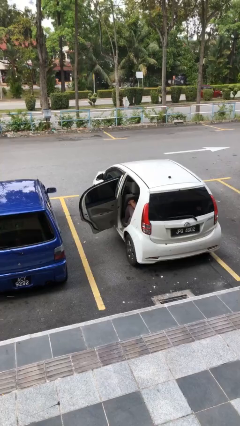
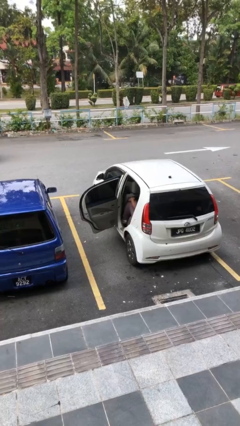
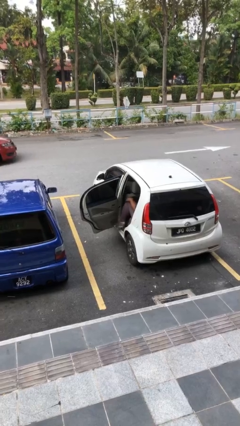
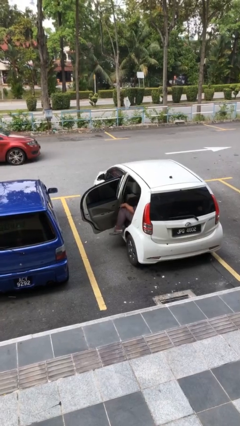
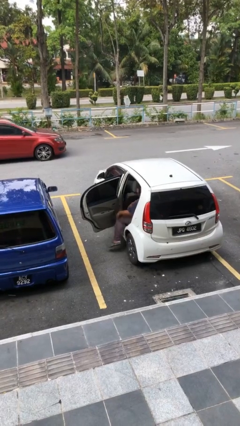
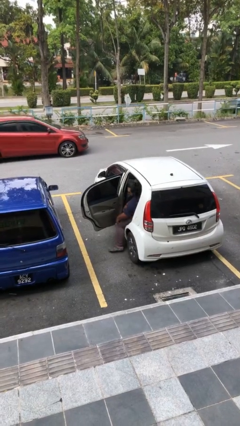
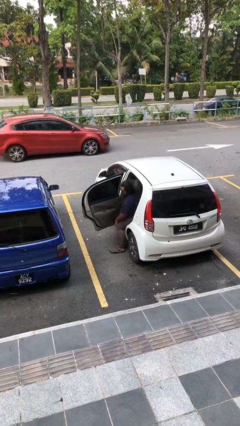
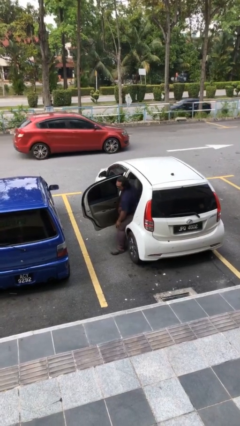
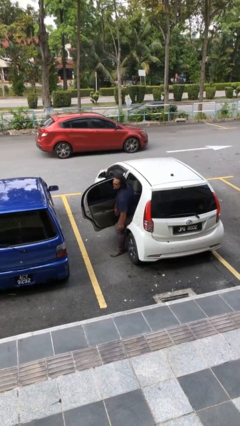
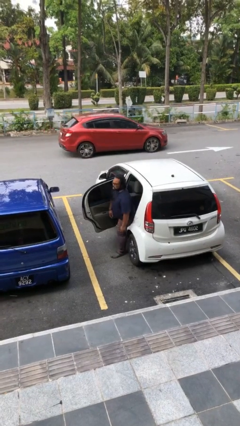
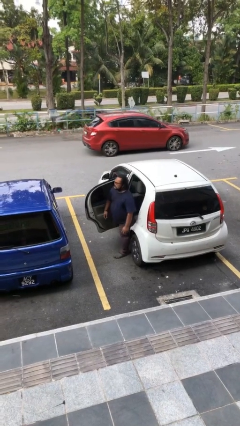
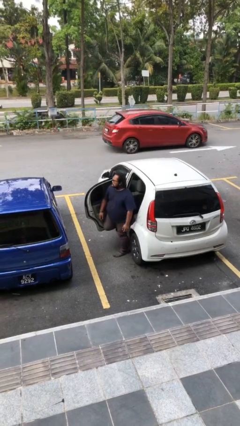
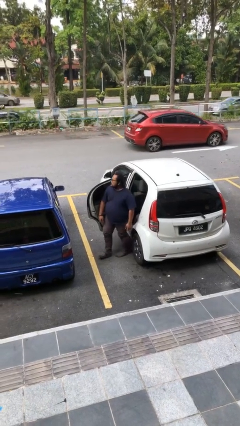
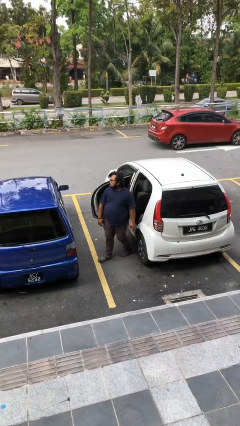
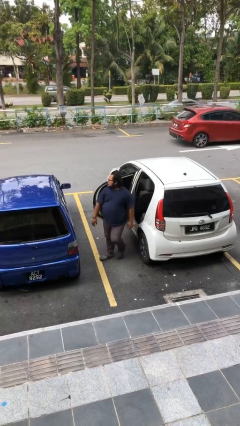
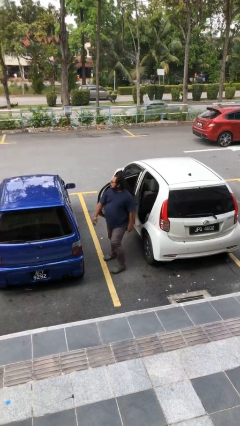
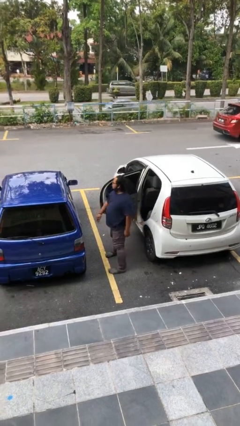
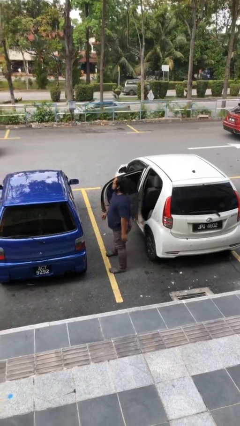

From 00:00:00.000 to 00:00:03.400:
person exits car

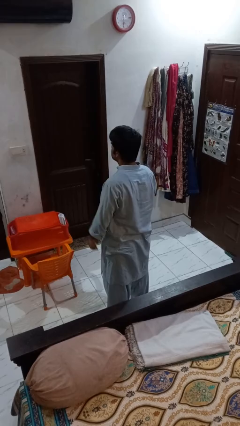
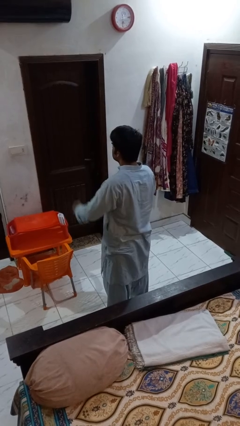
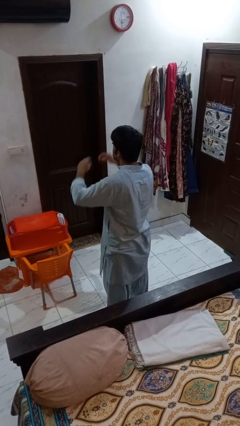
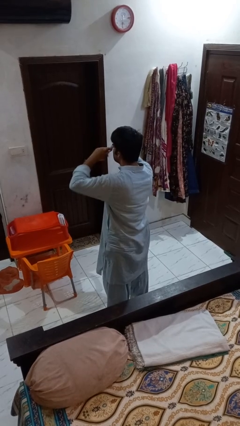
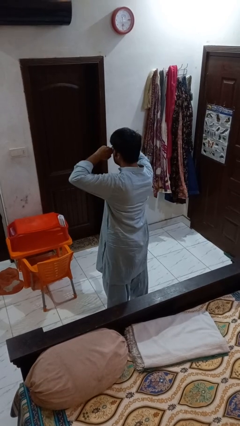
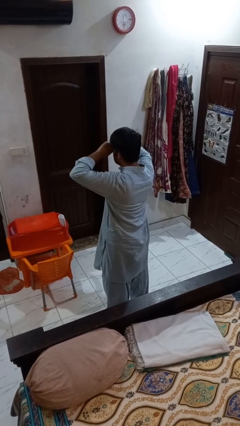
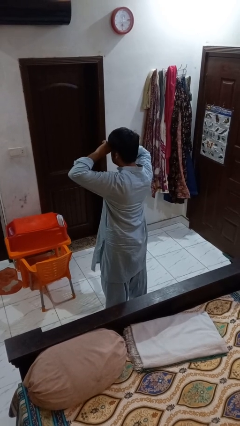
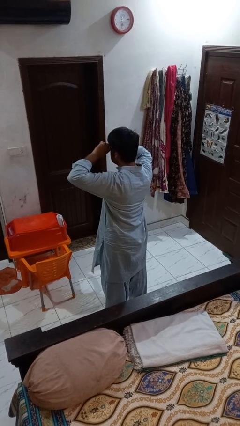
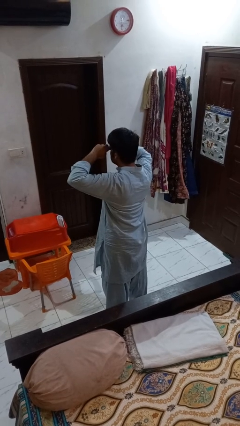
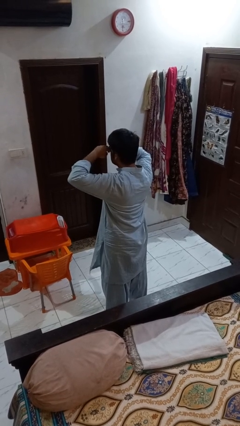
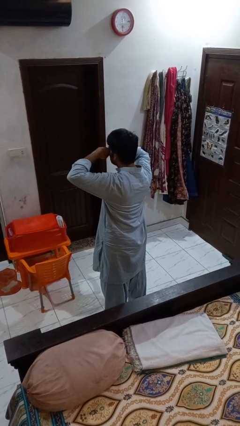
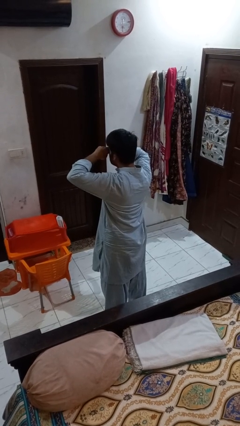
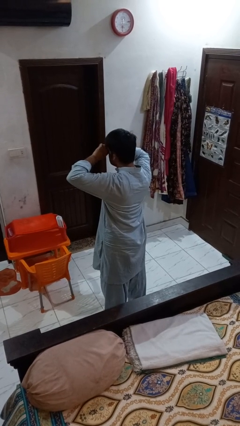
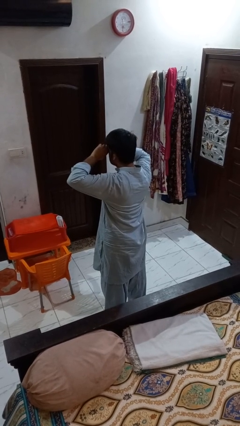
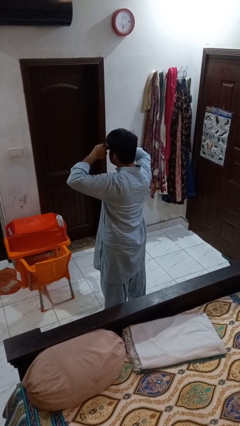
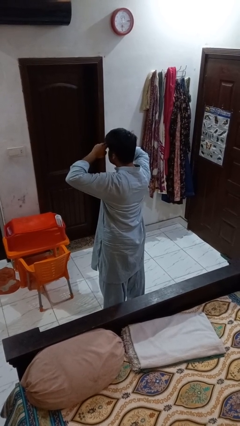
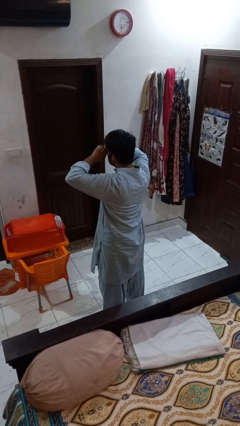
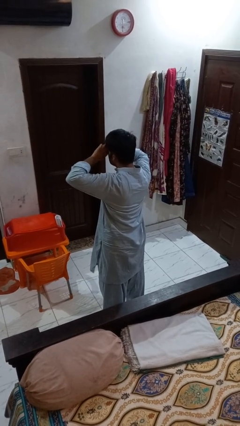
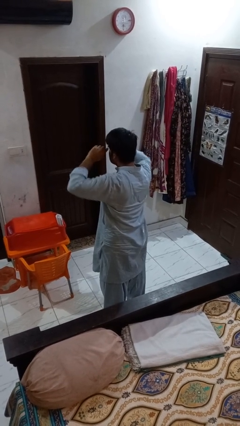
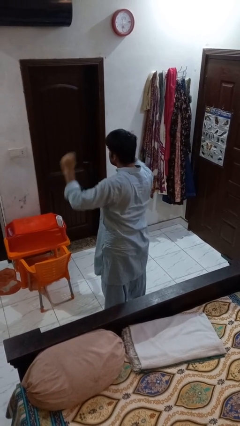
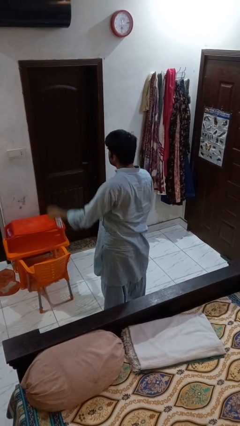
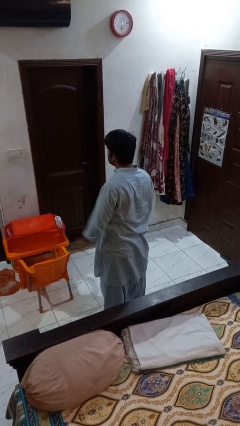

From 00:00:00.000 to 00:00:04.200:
person rubs eyes

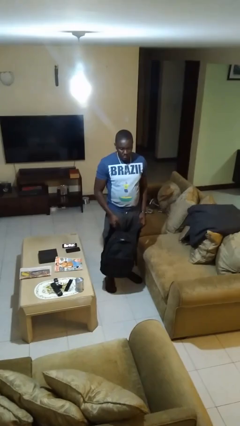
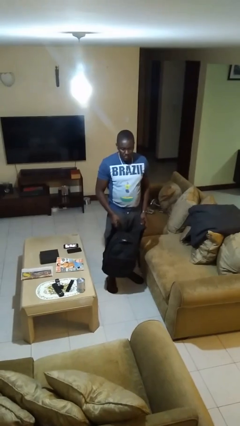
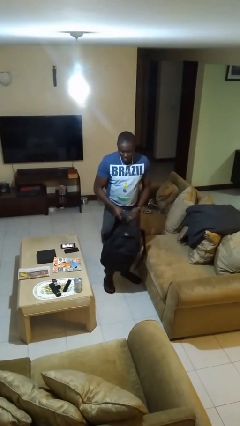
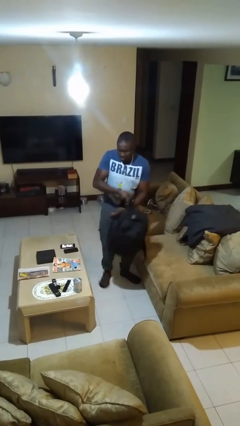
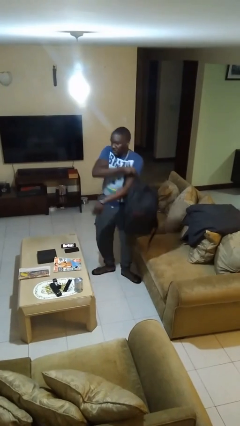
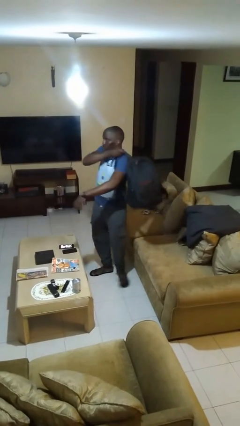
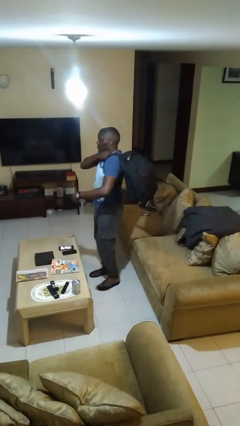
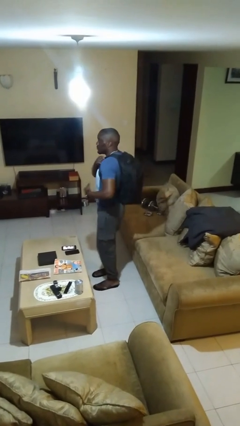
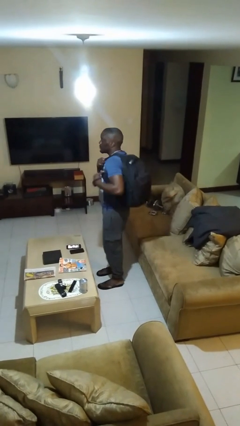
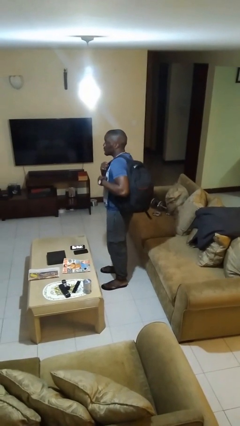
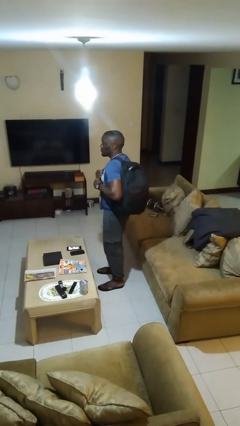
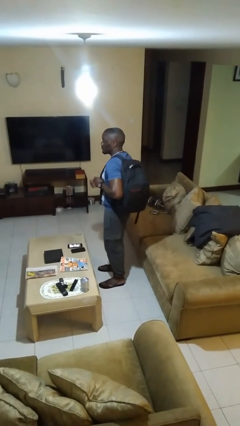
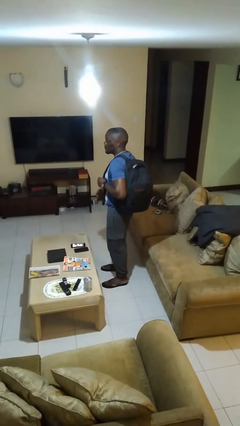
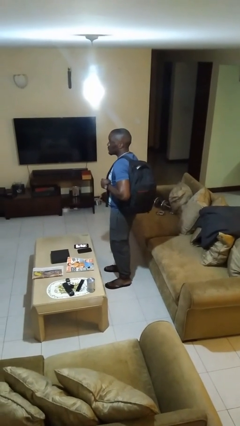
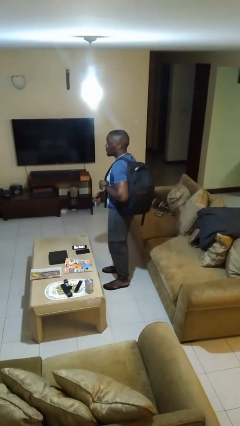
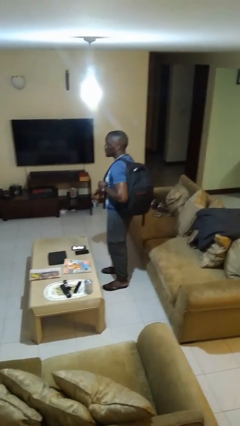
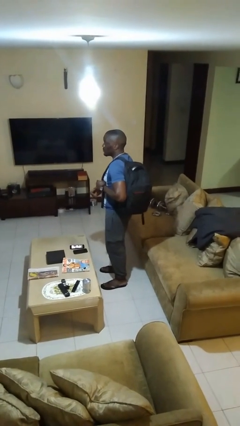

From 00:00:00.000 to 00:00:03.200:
person puts on backpack

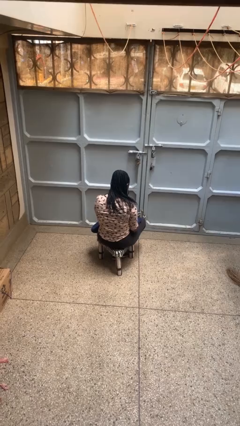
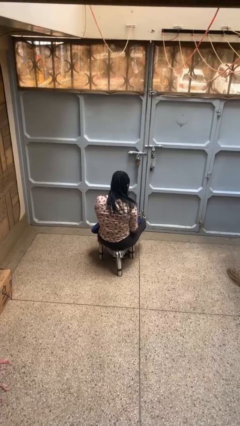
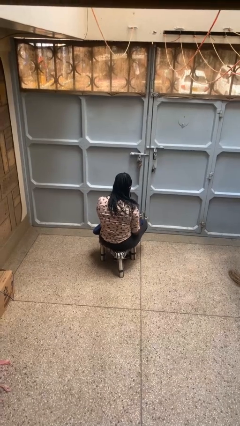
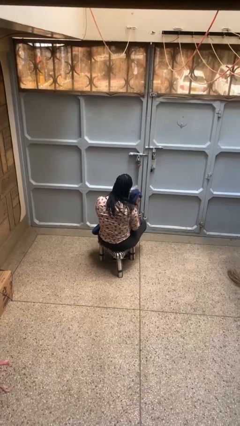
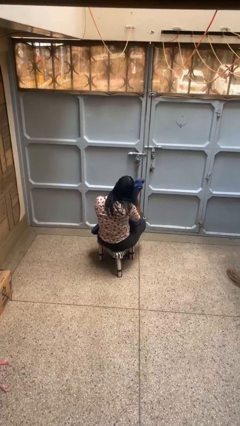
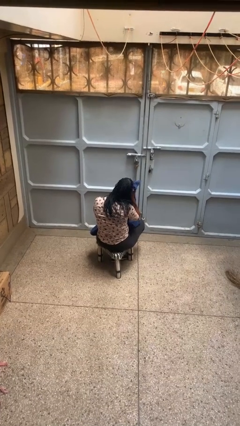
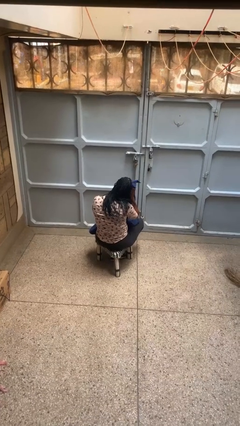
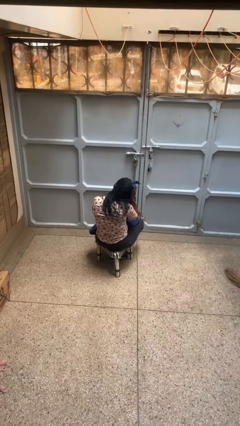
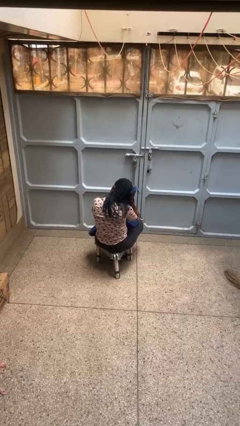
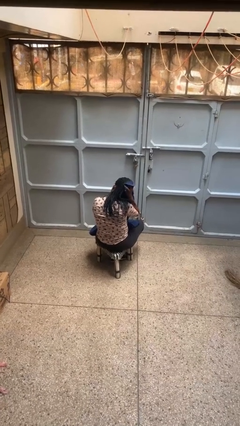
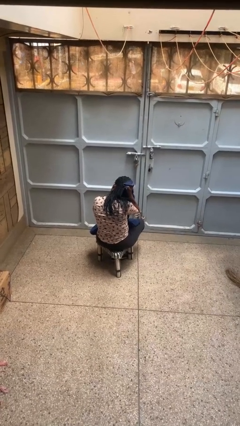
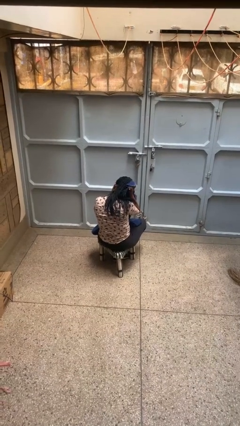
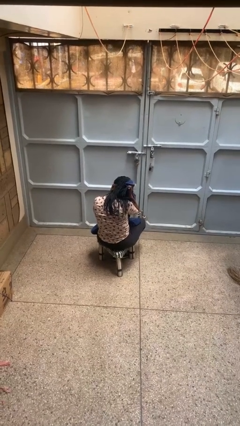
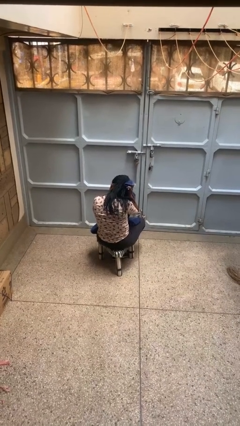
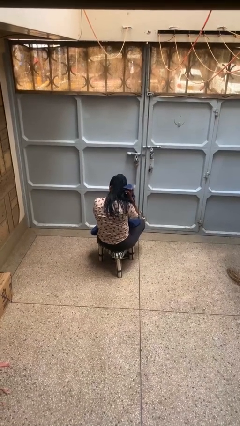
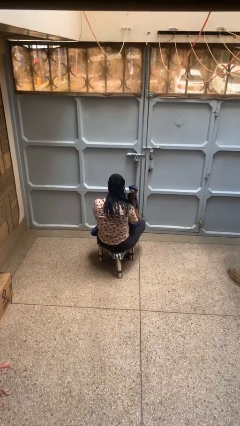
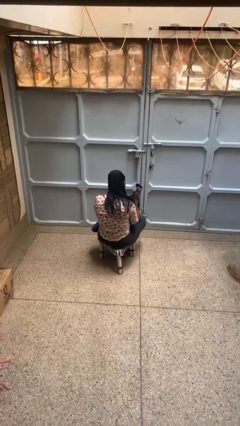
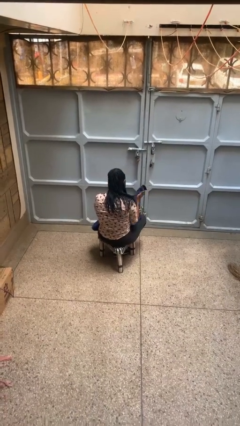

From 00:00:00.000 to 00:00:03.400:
person dries hair with towel

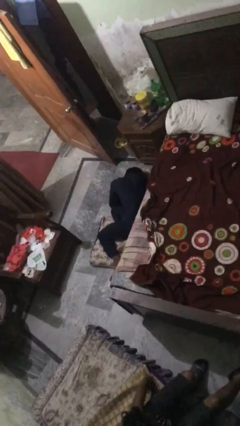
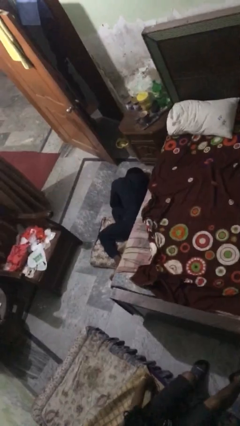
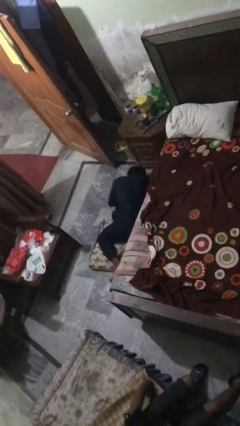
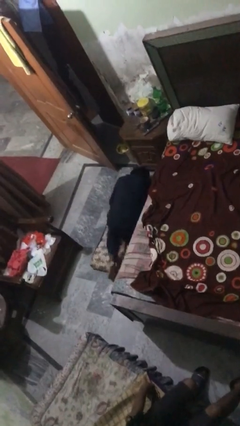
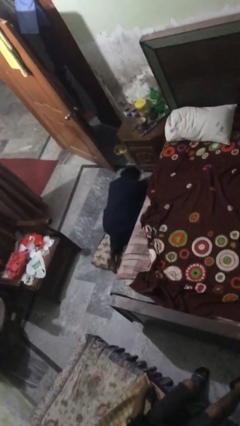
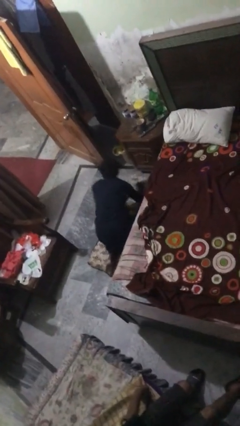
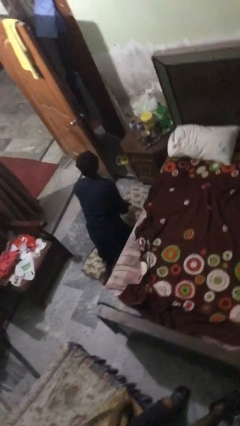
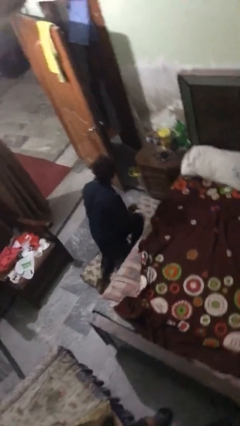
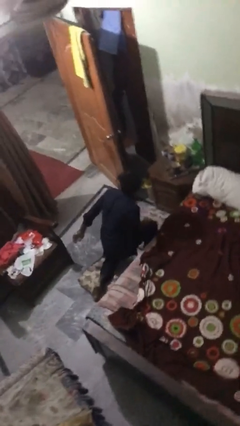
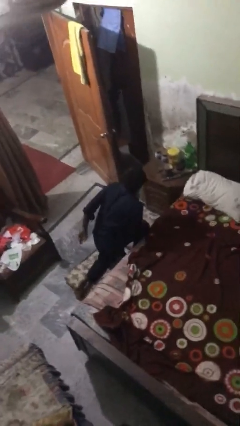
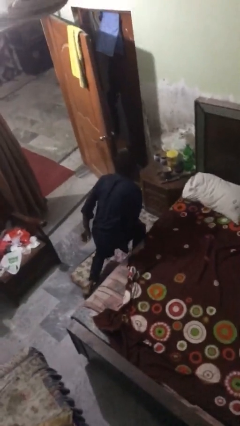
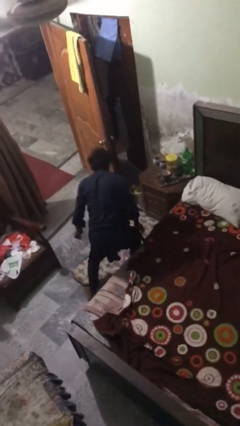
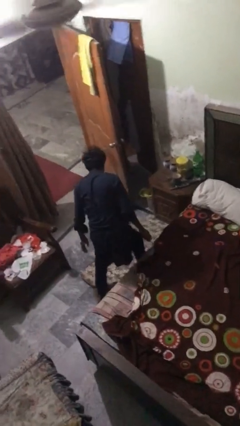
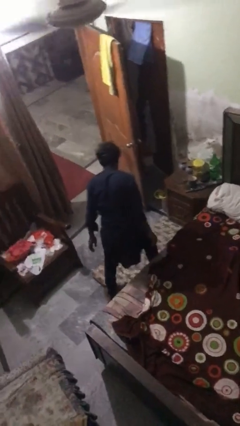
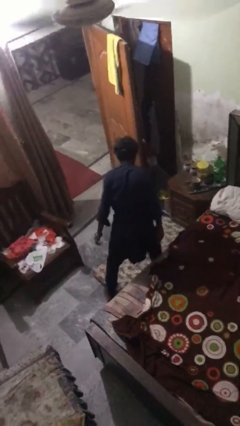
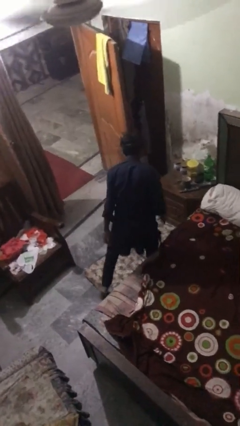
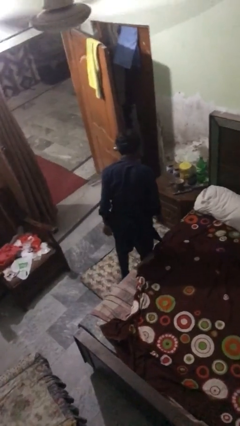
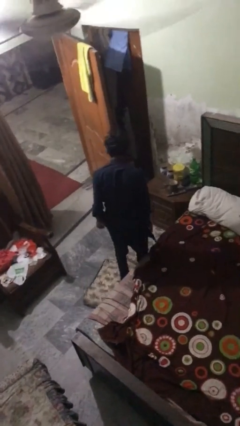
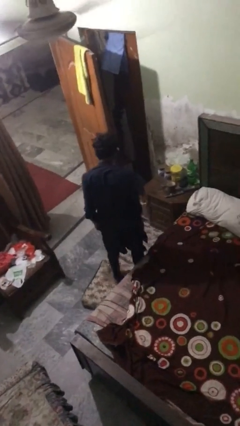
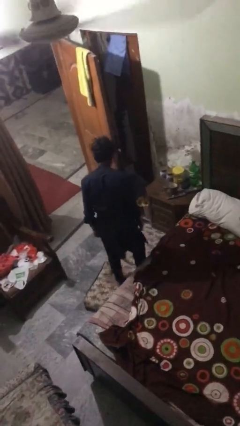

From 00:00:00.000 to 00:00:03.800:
person stands up from floor
